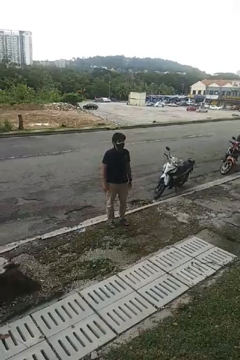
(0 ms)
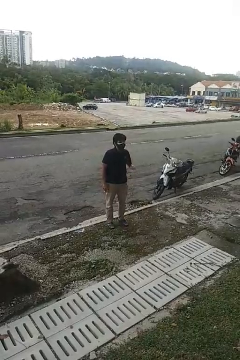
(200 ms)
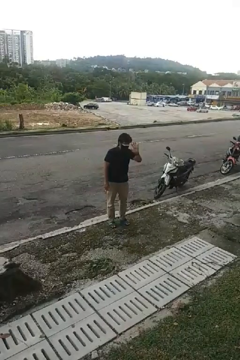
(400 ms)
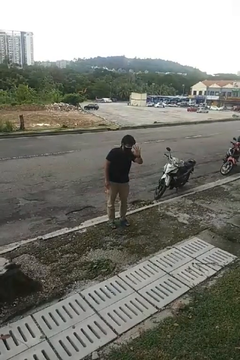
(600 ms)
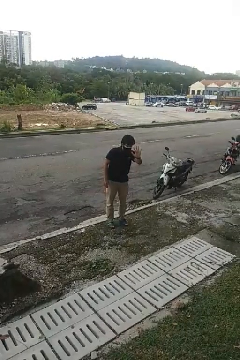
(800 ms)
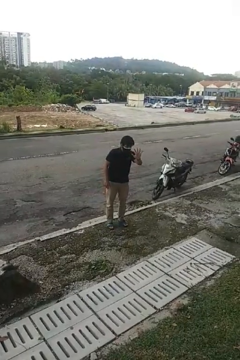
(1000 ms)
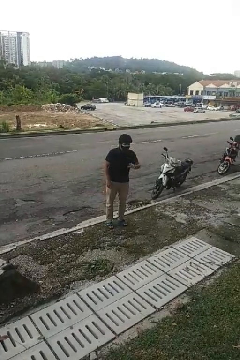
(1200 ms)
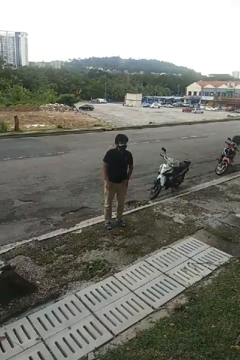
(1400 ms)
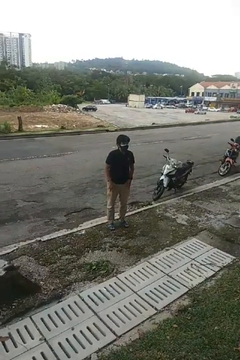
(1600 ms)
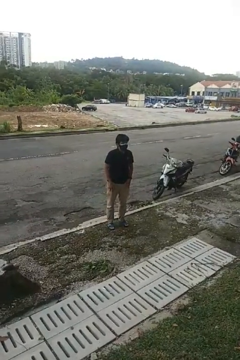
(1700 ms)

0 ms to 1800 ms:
person gestures stop

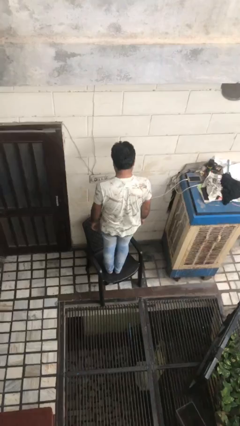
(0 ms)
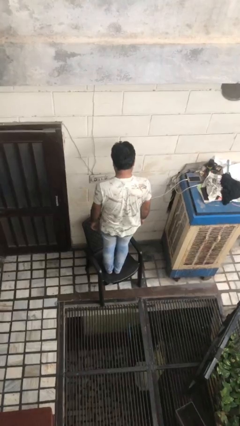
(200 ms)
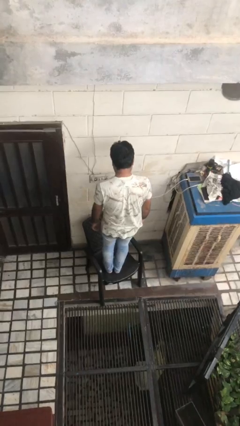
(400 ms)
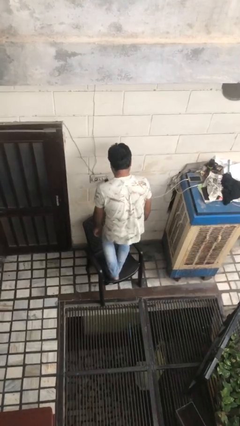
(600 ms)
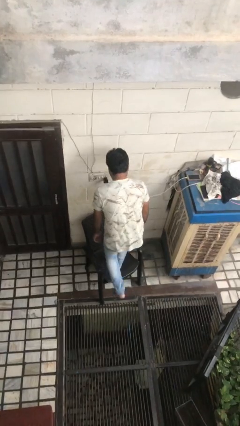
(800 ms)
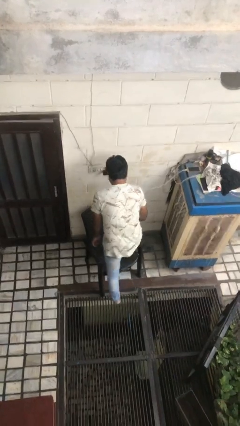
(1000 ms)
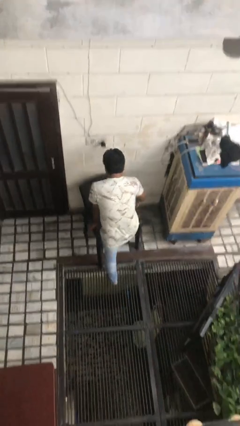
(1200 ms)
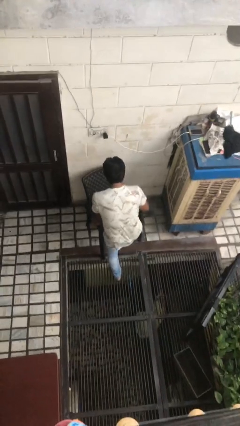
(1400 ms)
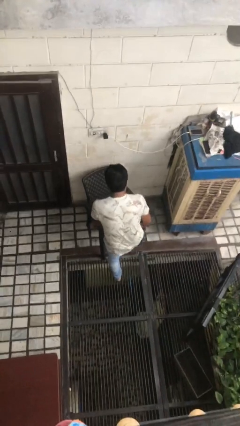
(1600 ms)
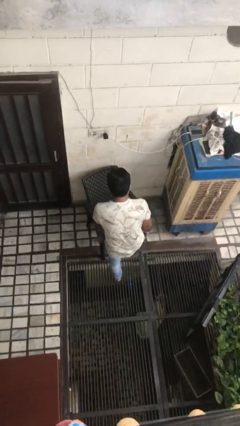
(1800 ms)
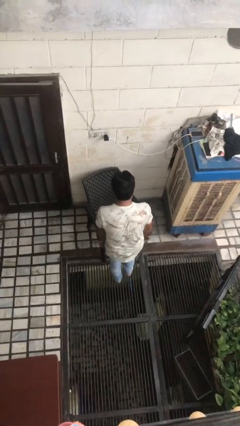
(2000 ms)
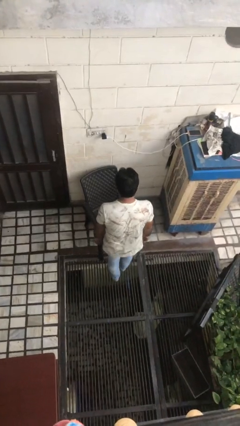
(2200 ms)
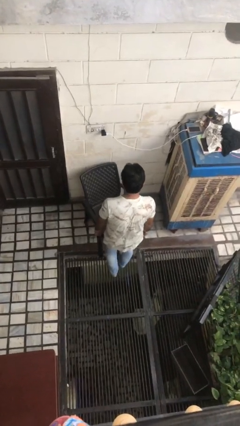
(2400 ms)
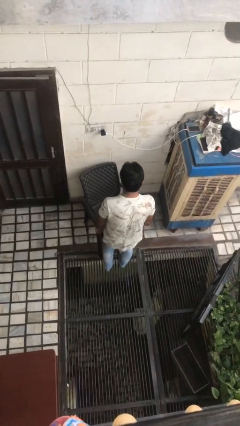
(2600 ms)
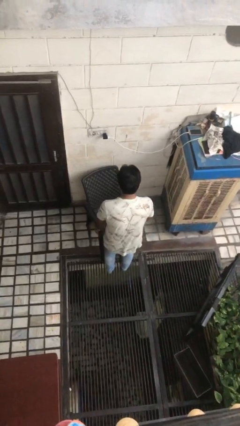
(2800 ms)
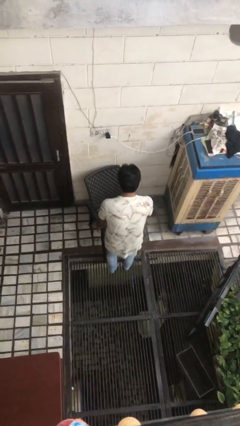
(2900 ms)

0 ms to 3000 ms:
person climbs off chair

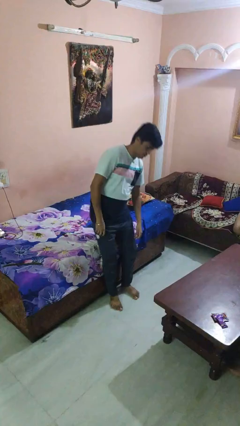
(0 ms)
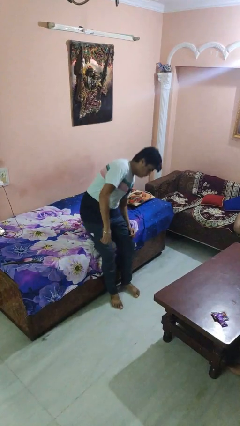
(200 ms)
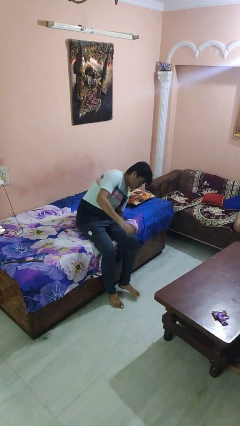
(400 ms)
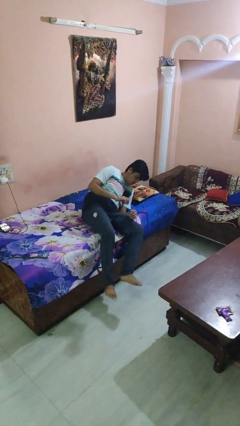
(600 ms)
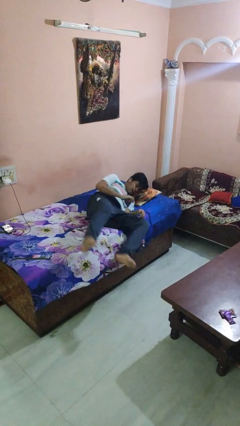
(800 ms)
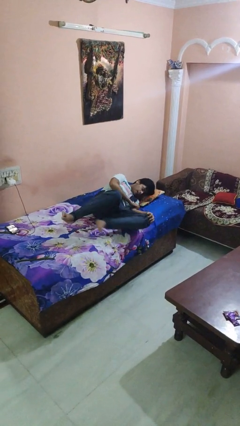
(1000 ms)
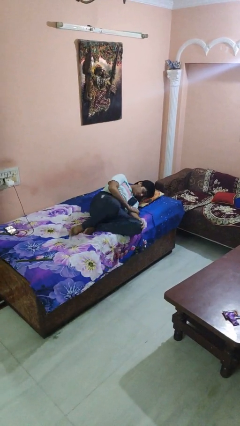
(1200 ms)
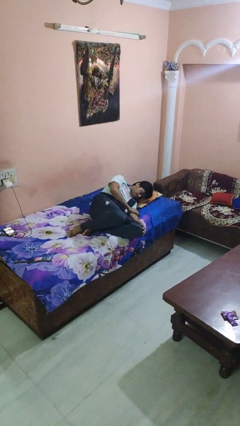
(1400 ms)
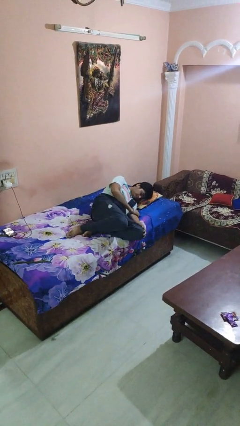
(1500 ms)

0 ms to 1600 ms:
person lies down on bed

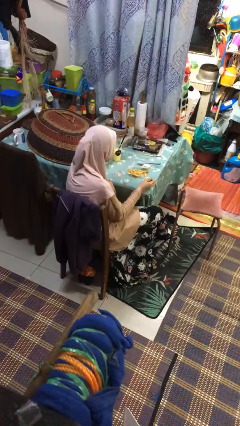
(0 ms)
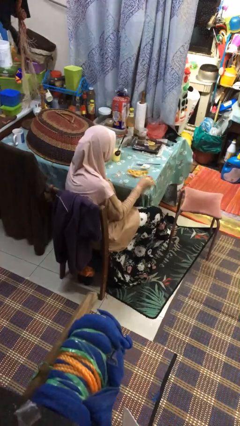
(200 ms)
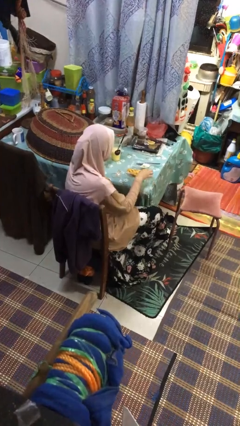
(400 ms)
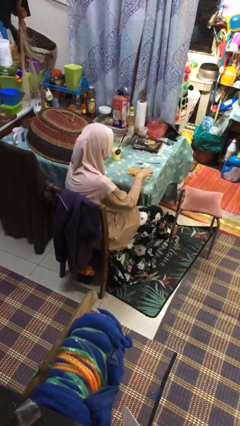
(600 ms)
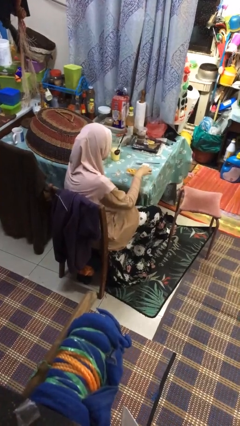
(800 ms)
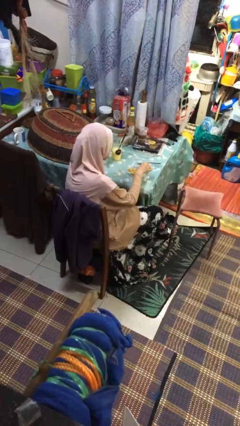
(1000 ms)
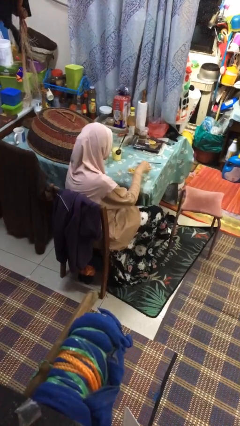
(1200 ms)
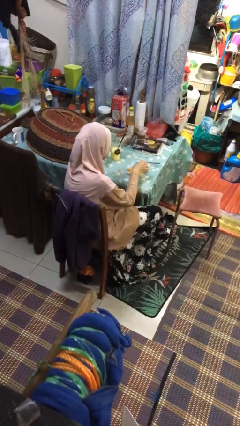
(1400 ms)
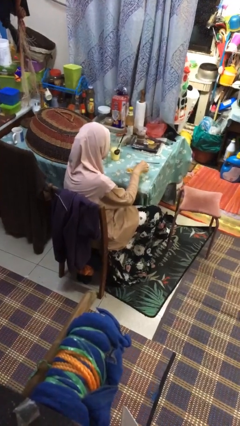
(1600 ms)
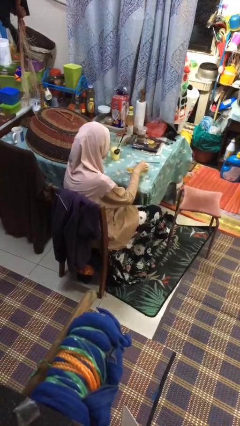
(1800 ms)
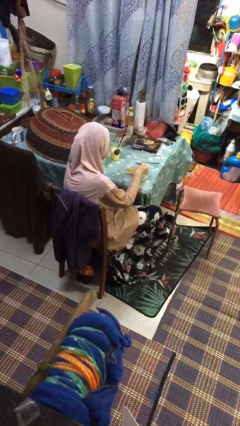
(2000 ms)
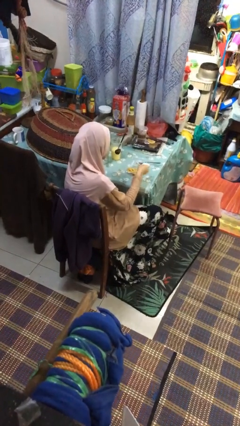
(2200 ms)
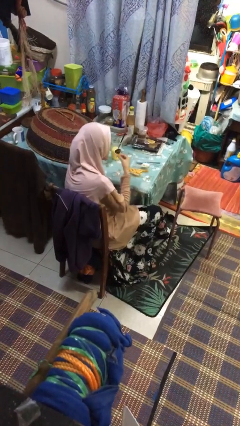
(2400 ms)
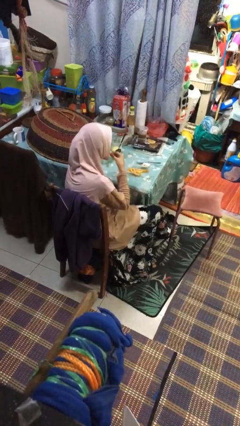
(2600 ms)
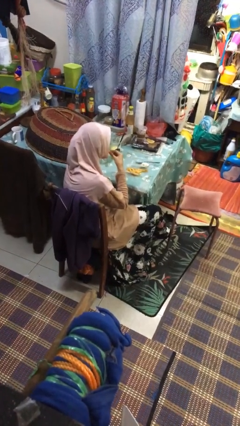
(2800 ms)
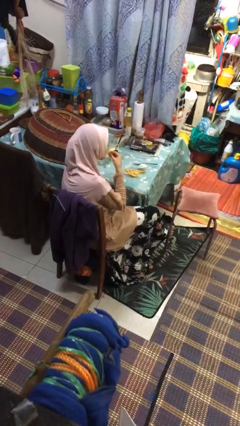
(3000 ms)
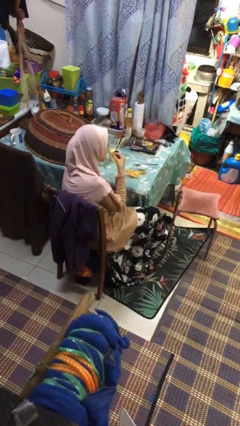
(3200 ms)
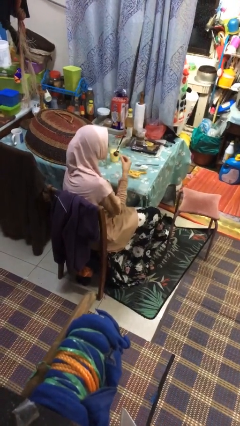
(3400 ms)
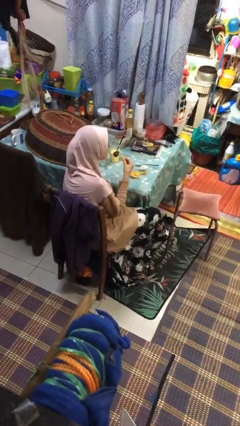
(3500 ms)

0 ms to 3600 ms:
person eats with hands

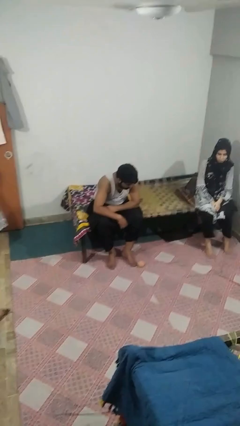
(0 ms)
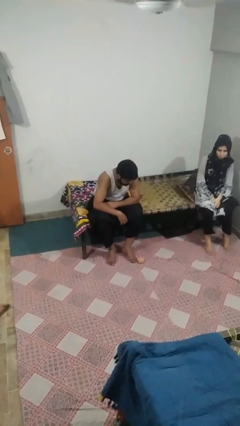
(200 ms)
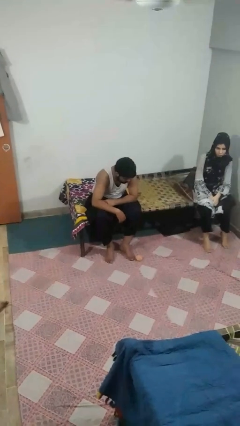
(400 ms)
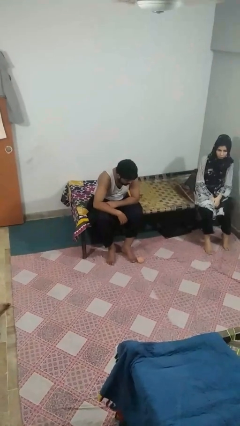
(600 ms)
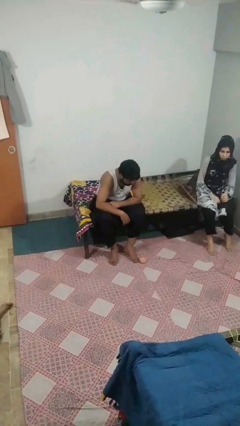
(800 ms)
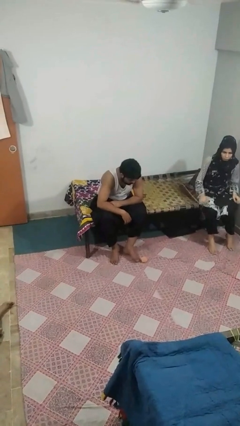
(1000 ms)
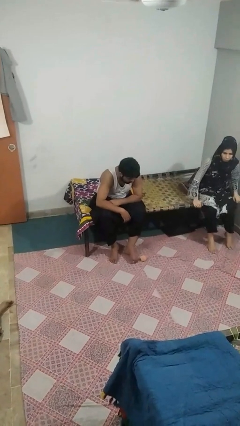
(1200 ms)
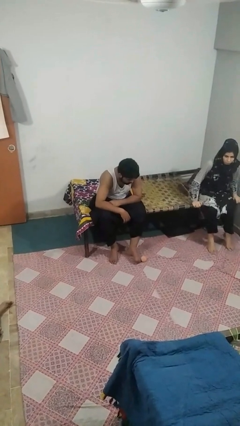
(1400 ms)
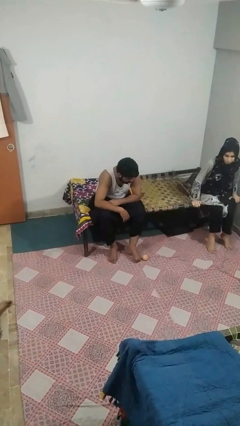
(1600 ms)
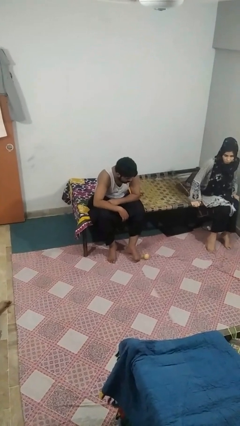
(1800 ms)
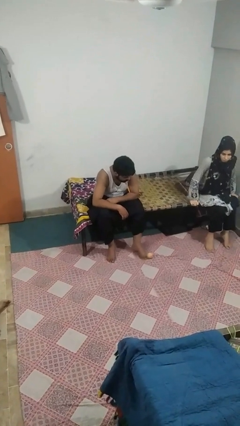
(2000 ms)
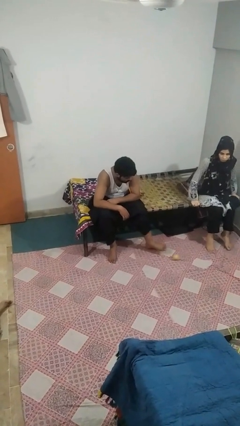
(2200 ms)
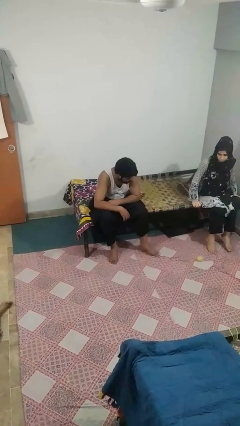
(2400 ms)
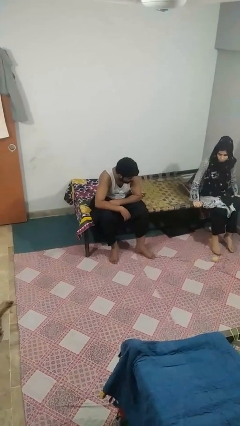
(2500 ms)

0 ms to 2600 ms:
person kicks object to person

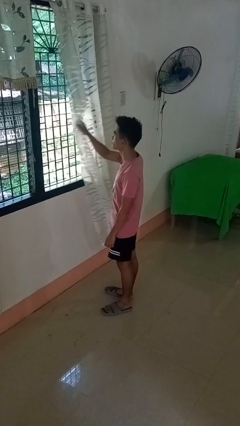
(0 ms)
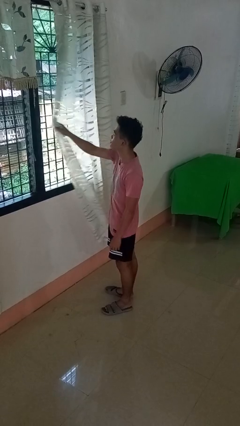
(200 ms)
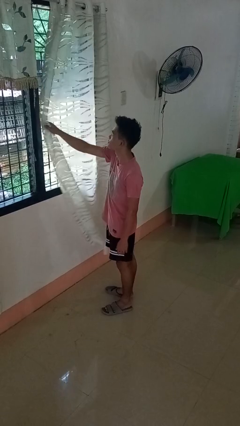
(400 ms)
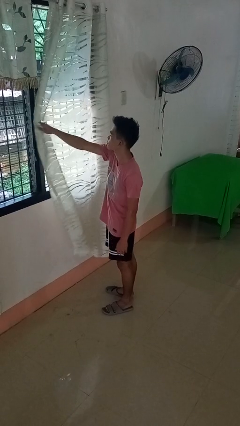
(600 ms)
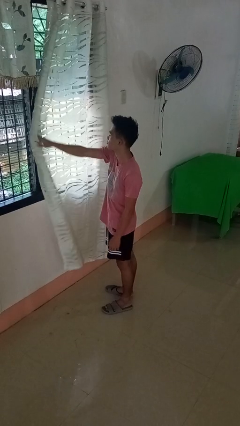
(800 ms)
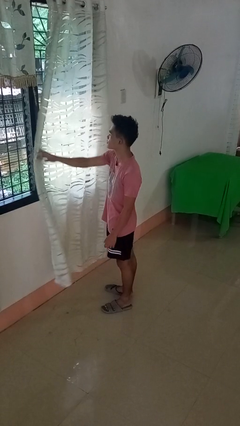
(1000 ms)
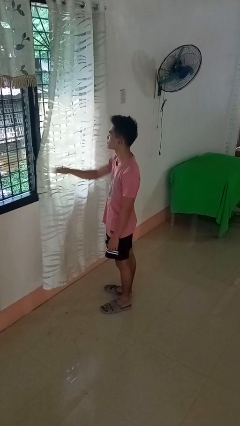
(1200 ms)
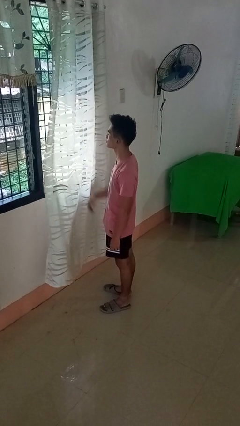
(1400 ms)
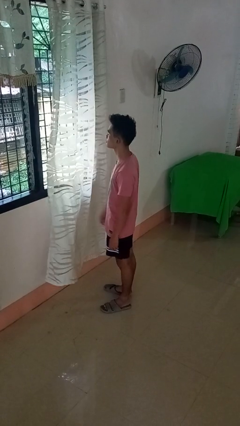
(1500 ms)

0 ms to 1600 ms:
person closes curtains

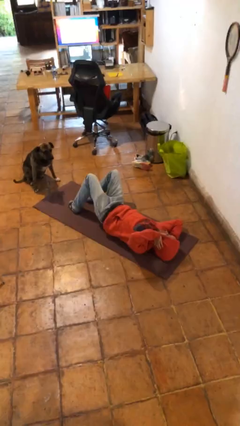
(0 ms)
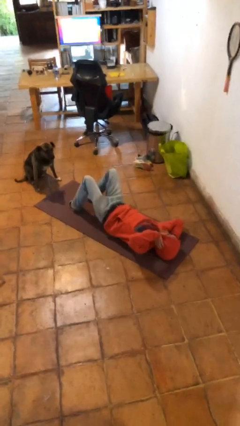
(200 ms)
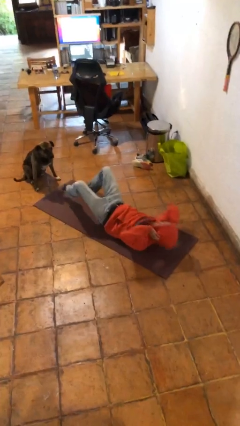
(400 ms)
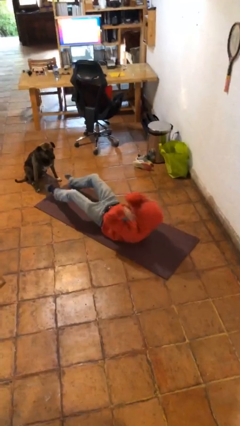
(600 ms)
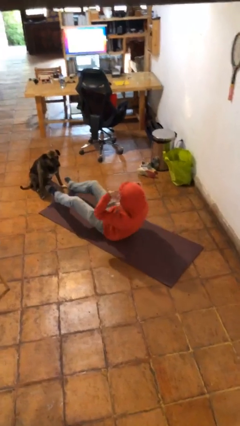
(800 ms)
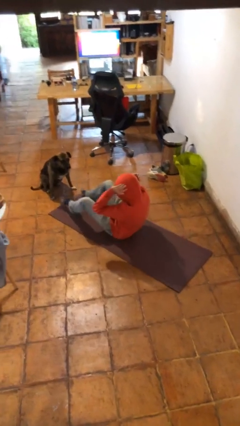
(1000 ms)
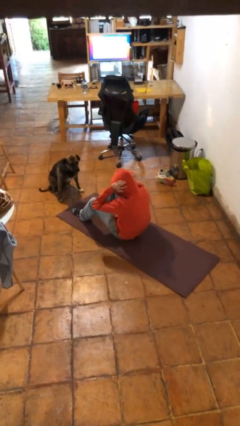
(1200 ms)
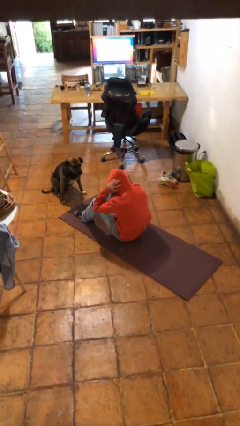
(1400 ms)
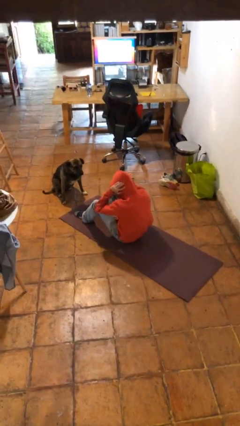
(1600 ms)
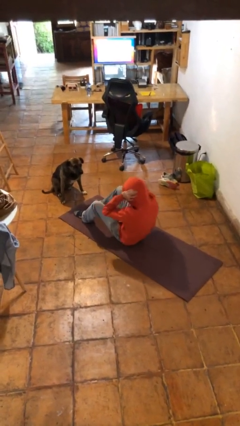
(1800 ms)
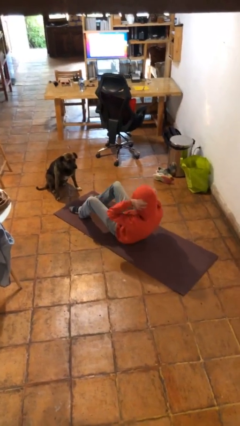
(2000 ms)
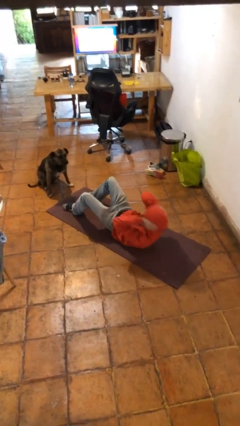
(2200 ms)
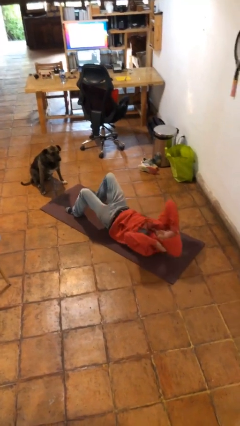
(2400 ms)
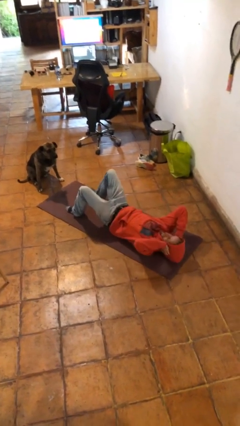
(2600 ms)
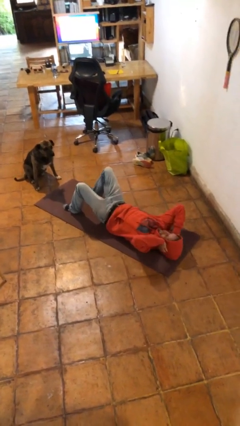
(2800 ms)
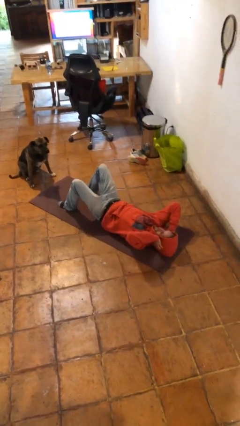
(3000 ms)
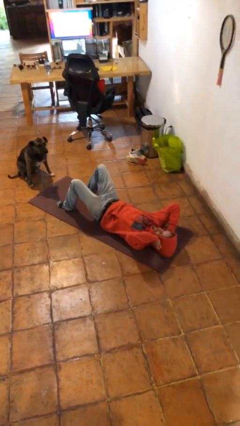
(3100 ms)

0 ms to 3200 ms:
person exercises with situp
